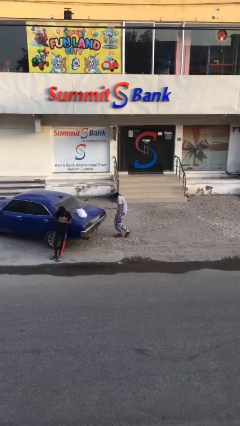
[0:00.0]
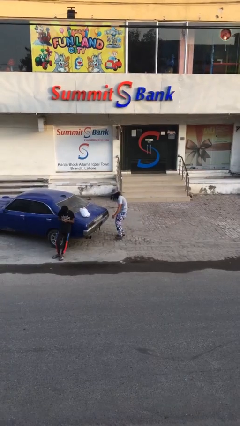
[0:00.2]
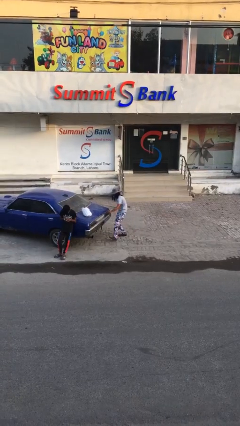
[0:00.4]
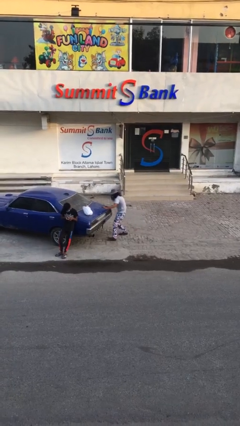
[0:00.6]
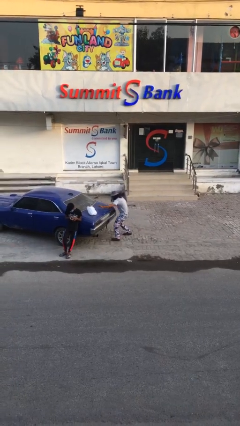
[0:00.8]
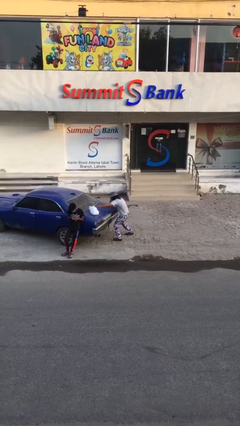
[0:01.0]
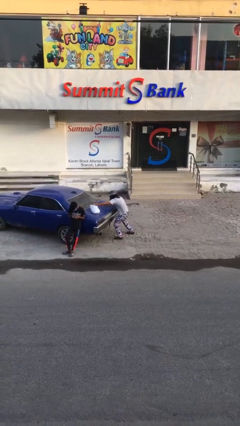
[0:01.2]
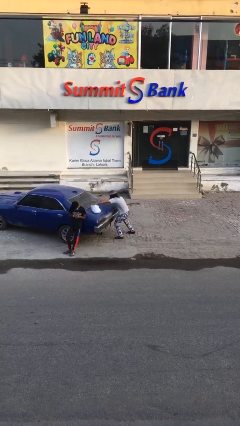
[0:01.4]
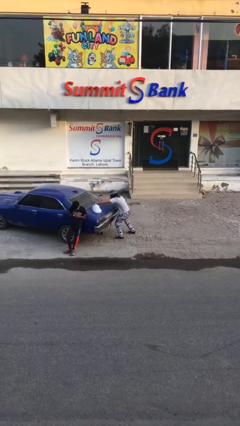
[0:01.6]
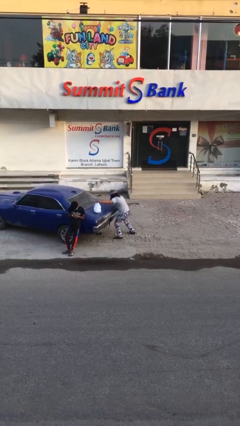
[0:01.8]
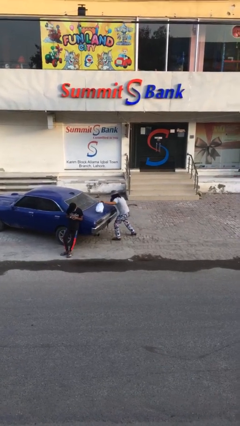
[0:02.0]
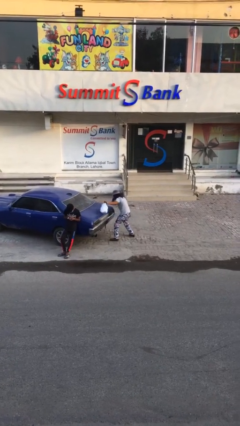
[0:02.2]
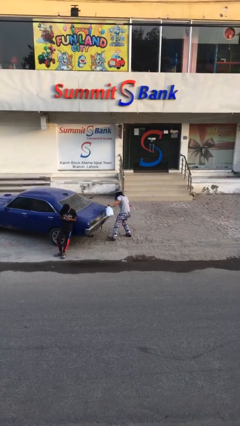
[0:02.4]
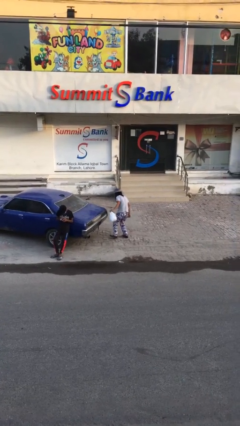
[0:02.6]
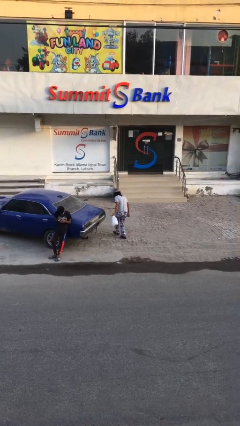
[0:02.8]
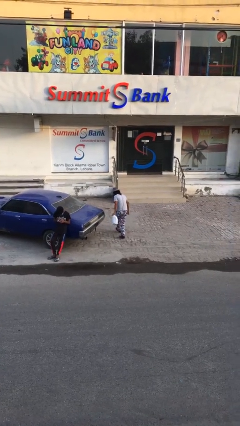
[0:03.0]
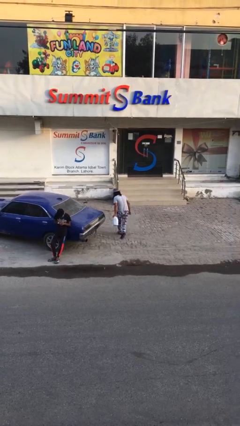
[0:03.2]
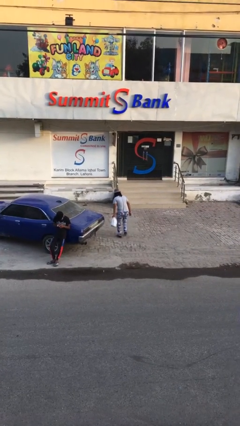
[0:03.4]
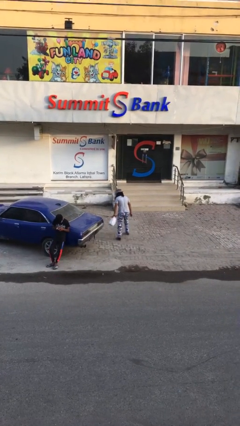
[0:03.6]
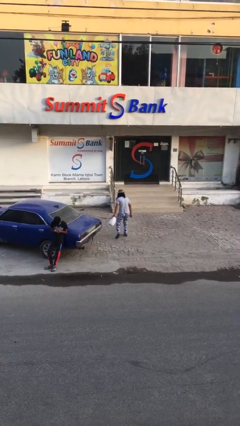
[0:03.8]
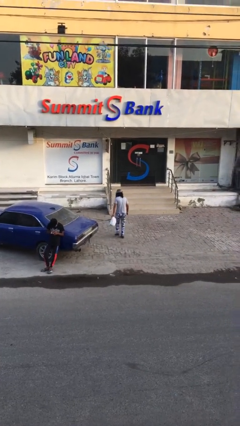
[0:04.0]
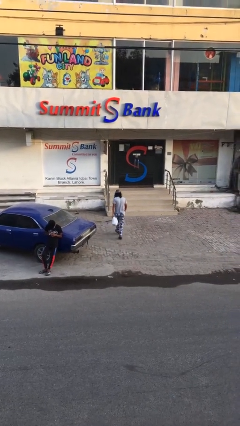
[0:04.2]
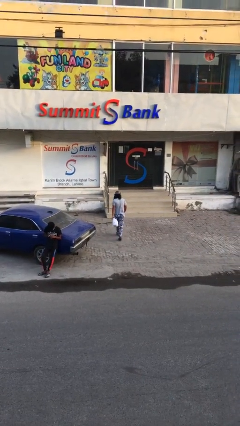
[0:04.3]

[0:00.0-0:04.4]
person steals object from person

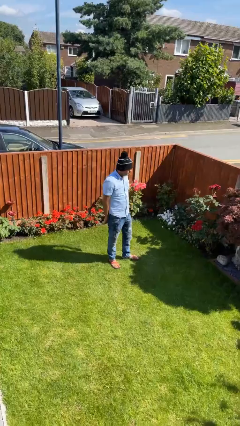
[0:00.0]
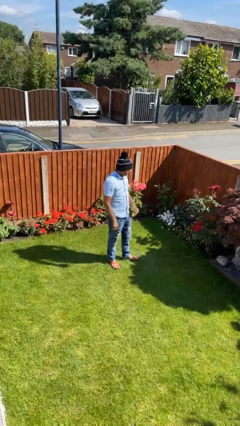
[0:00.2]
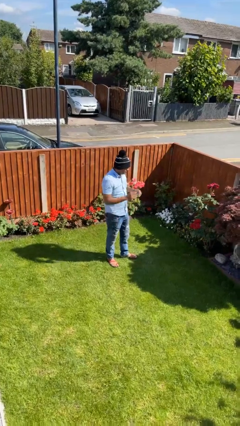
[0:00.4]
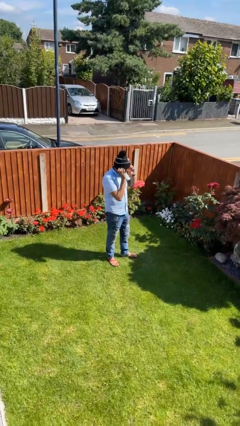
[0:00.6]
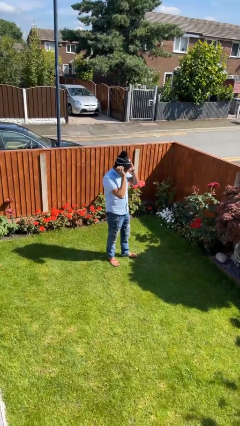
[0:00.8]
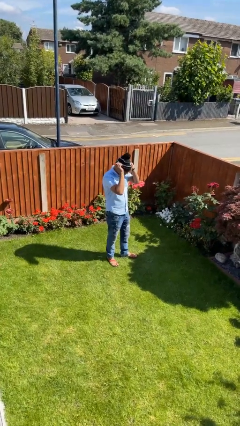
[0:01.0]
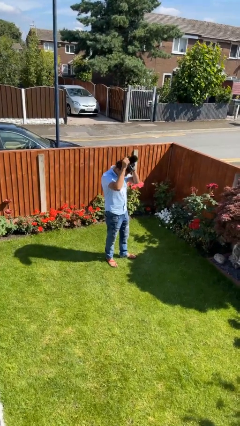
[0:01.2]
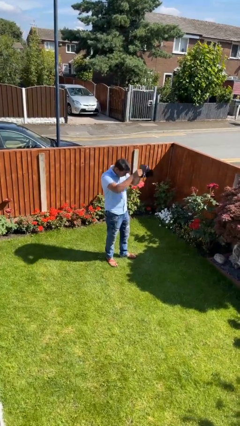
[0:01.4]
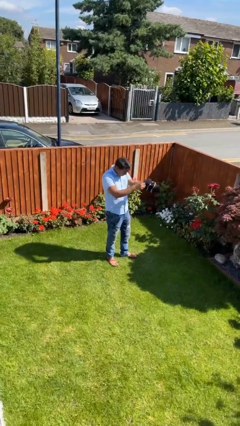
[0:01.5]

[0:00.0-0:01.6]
person takes off hat

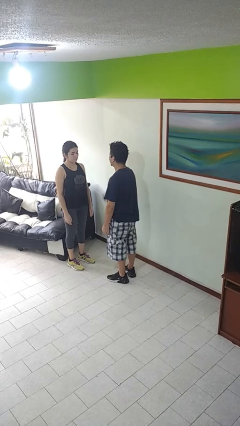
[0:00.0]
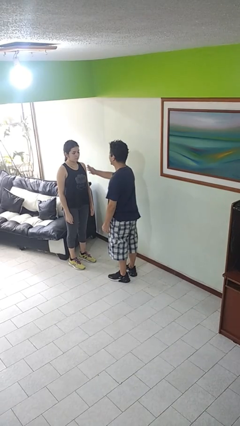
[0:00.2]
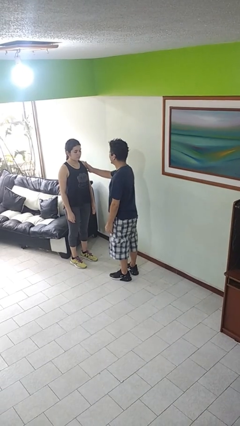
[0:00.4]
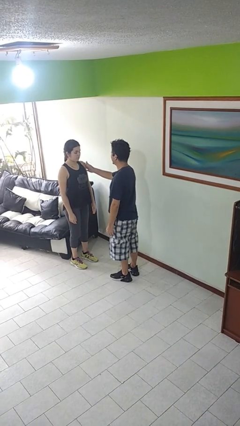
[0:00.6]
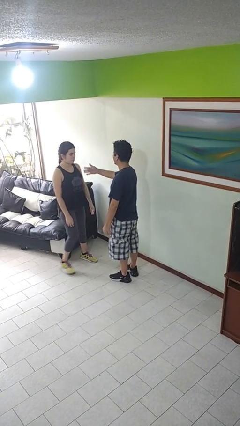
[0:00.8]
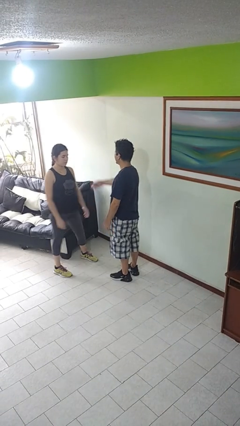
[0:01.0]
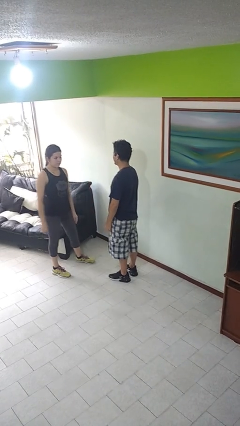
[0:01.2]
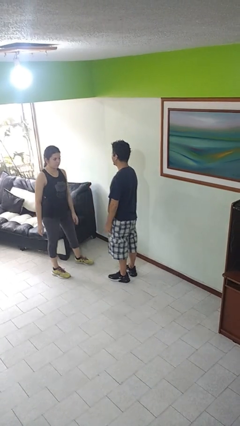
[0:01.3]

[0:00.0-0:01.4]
person shoves person

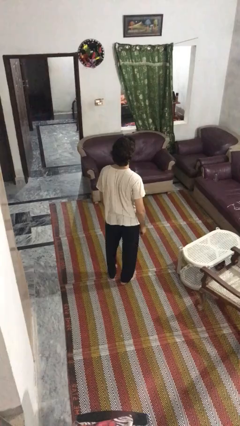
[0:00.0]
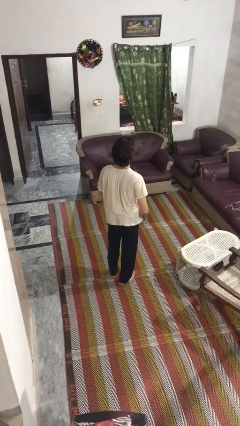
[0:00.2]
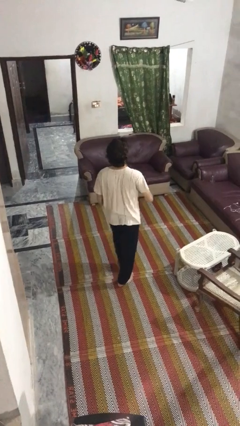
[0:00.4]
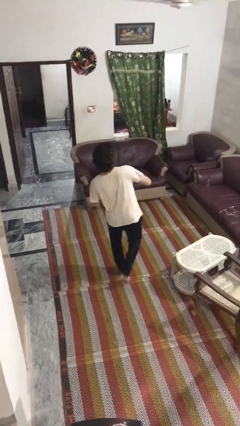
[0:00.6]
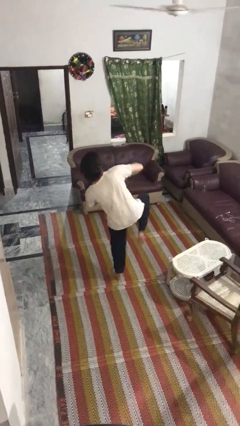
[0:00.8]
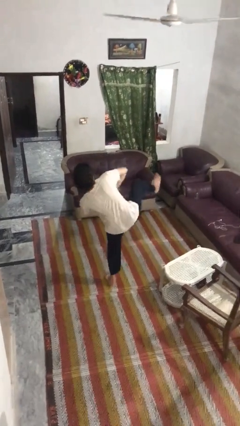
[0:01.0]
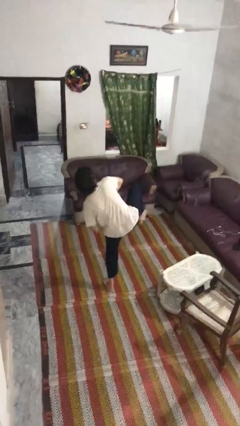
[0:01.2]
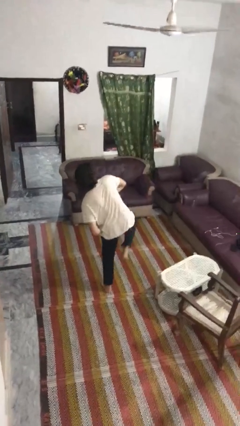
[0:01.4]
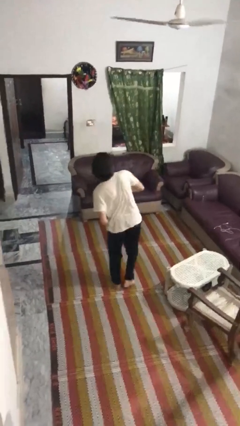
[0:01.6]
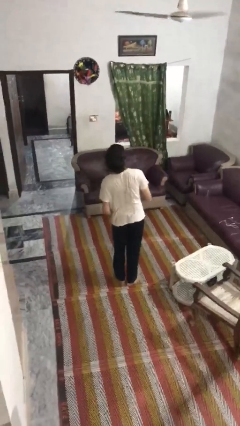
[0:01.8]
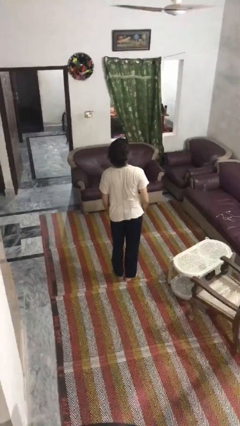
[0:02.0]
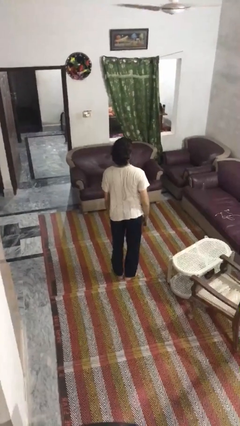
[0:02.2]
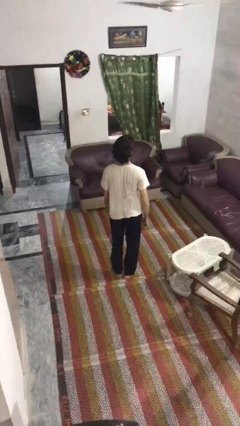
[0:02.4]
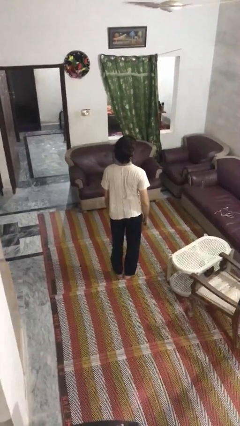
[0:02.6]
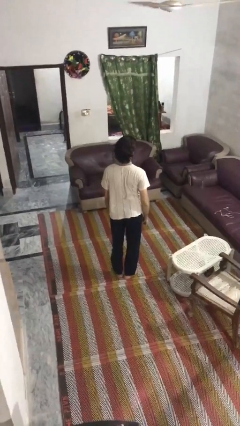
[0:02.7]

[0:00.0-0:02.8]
person karate kicks

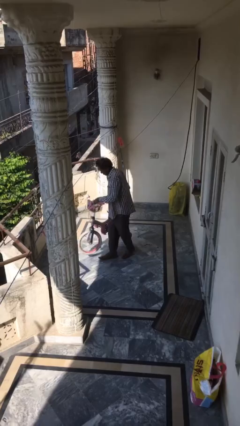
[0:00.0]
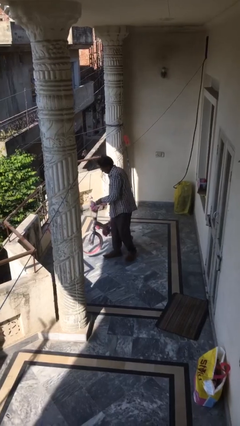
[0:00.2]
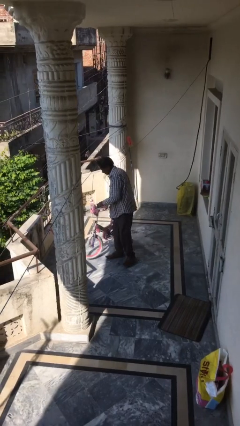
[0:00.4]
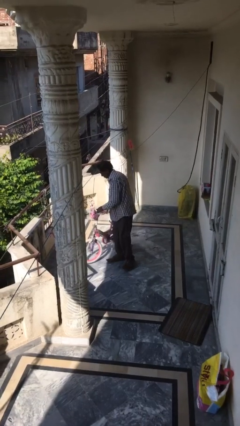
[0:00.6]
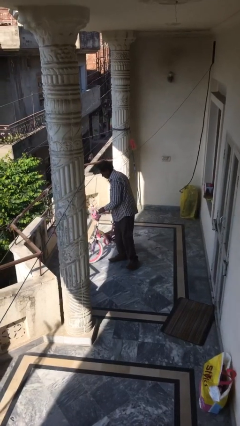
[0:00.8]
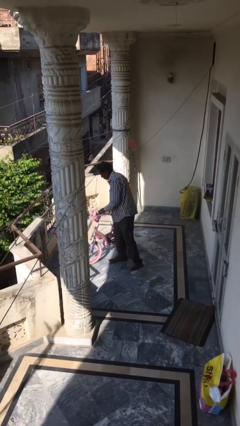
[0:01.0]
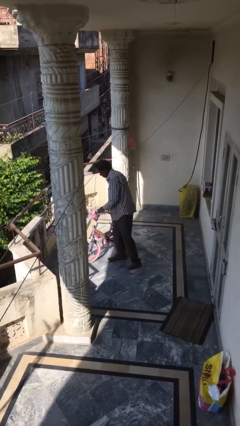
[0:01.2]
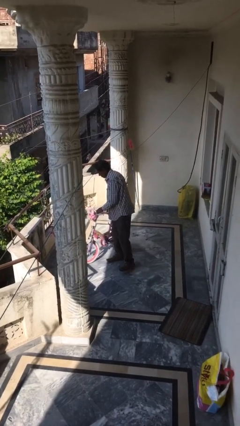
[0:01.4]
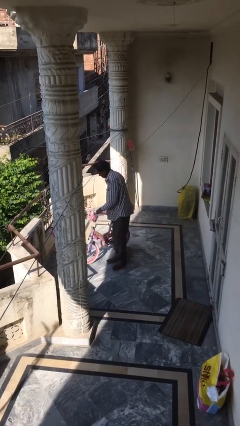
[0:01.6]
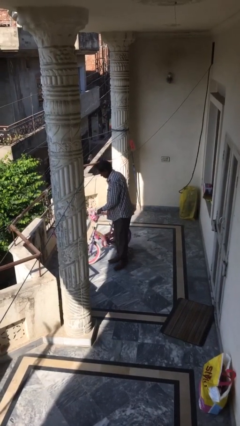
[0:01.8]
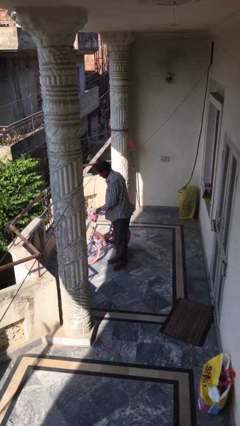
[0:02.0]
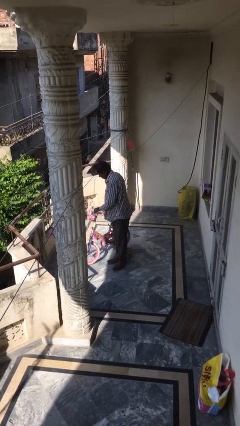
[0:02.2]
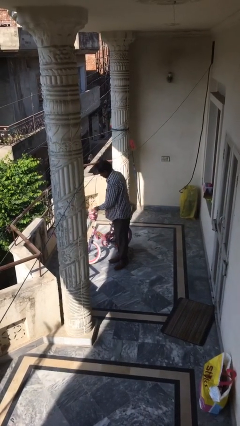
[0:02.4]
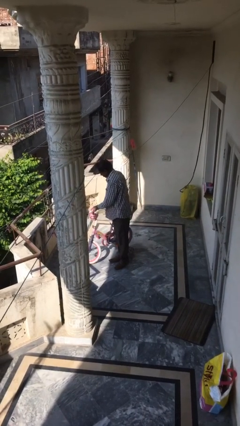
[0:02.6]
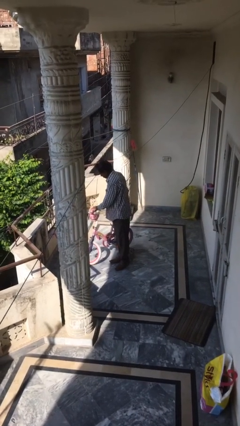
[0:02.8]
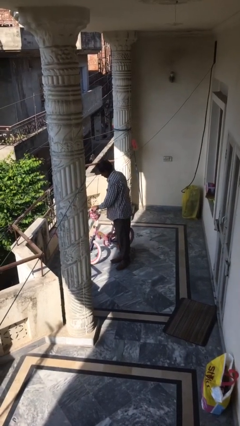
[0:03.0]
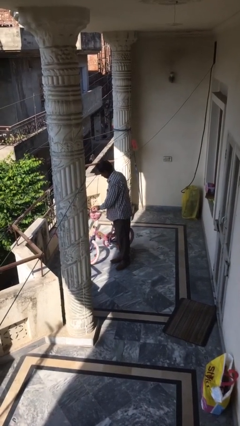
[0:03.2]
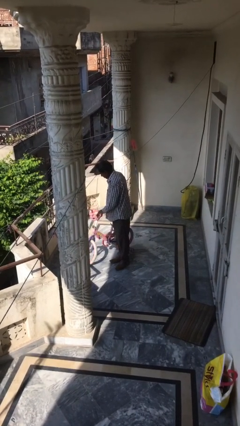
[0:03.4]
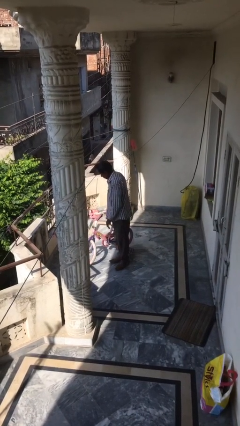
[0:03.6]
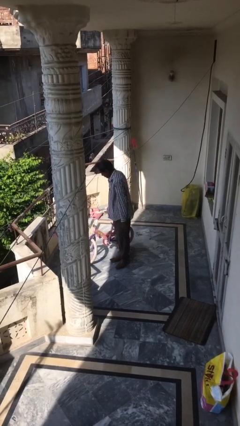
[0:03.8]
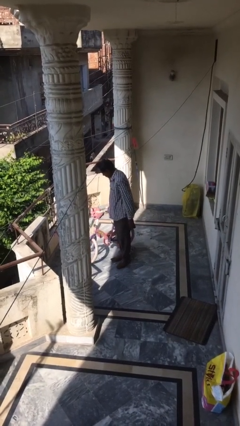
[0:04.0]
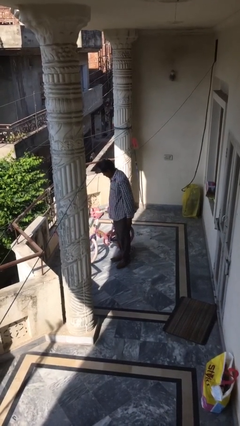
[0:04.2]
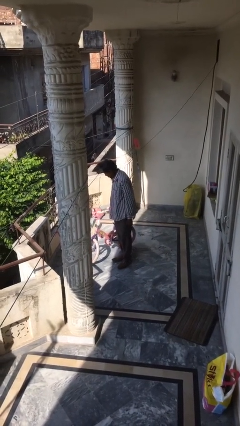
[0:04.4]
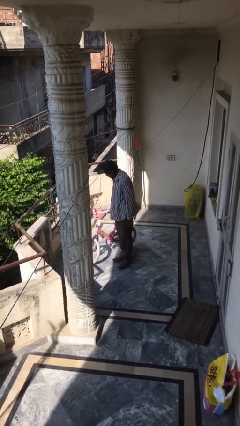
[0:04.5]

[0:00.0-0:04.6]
person puts down object on floor

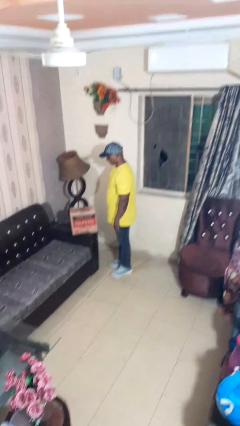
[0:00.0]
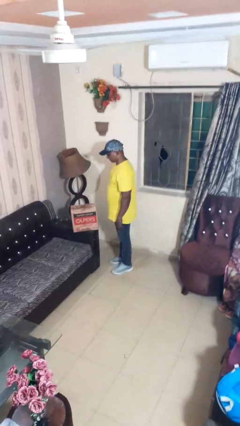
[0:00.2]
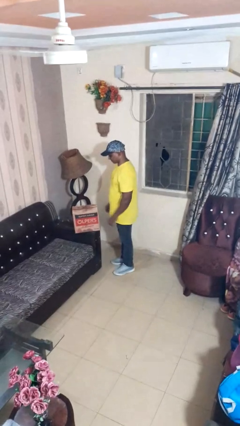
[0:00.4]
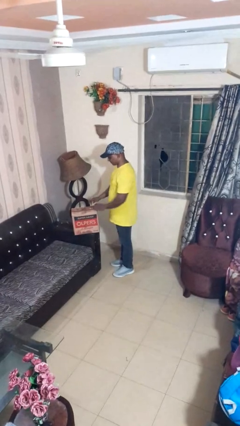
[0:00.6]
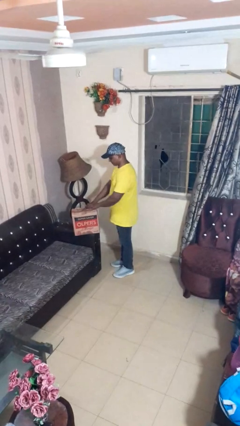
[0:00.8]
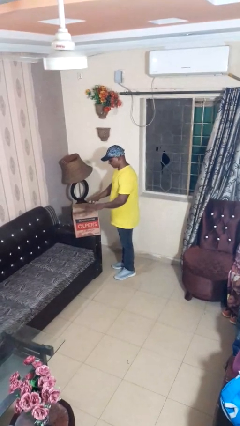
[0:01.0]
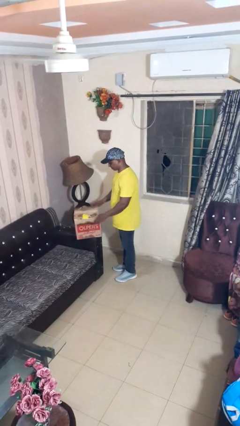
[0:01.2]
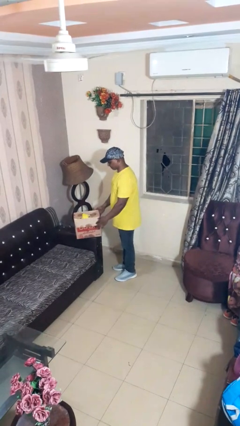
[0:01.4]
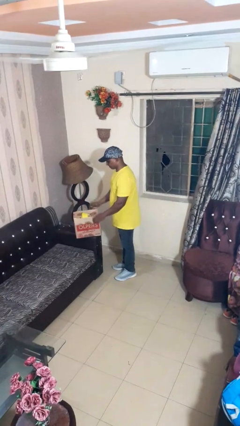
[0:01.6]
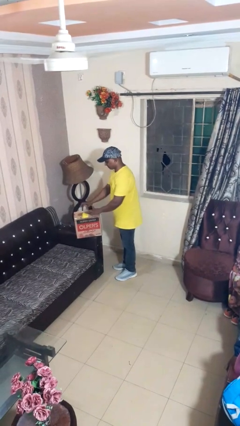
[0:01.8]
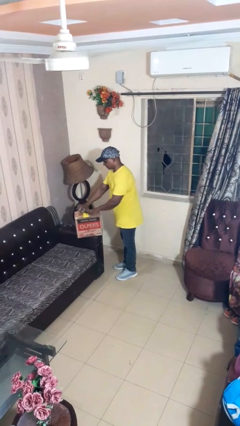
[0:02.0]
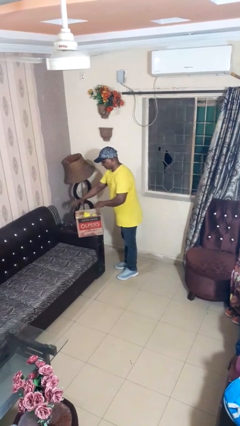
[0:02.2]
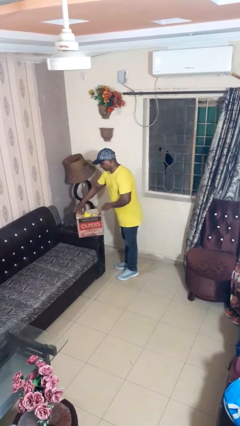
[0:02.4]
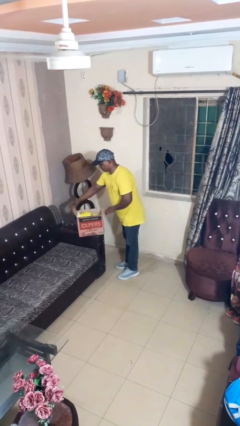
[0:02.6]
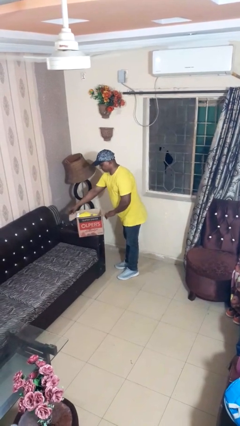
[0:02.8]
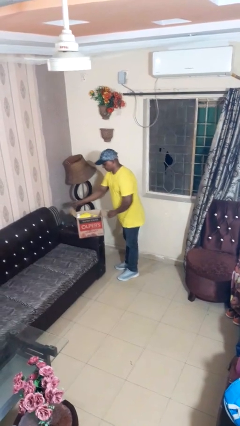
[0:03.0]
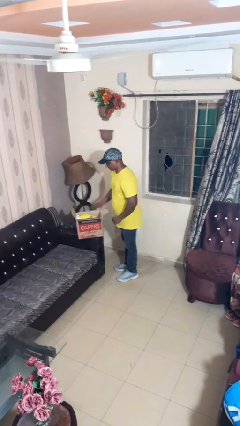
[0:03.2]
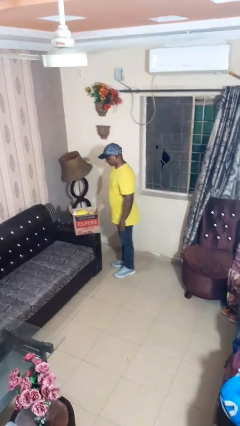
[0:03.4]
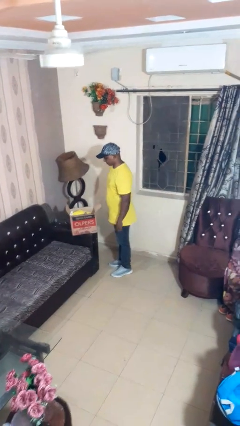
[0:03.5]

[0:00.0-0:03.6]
person opens box
